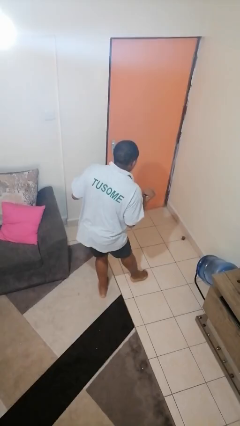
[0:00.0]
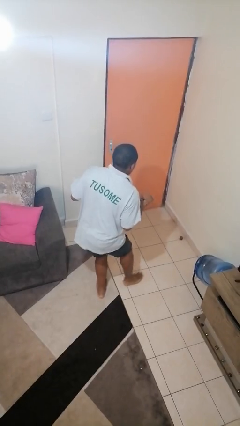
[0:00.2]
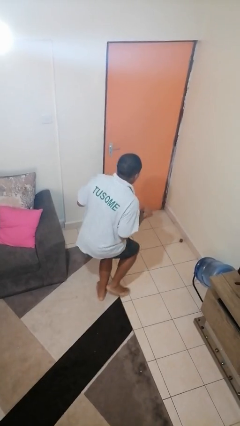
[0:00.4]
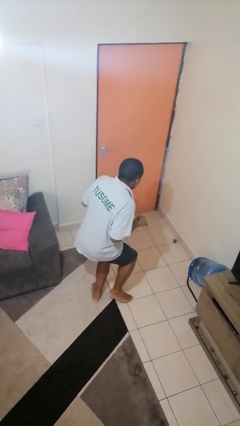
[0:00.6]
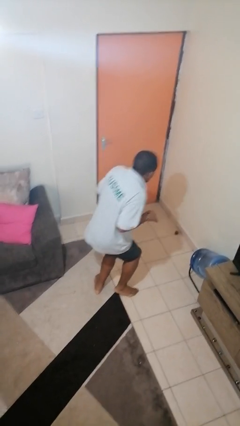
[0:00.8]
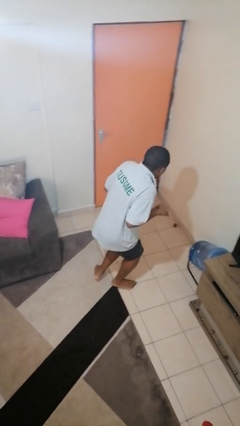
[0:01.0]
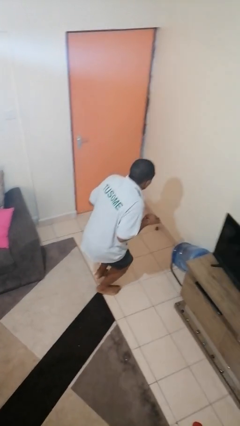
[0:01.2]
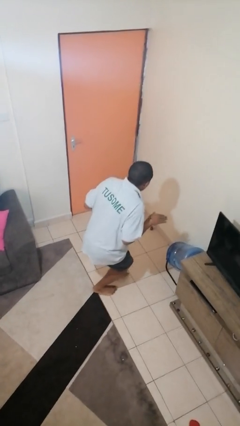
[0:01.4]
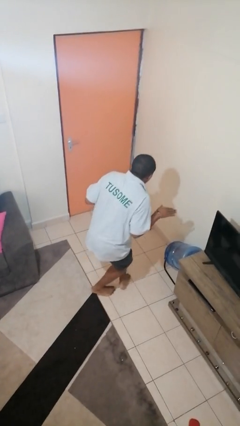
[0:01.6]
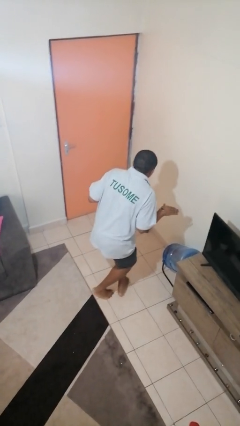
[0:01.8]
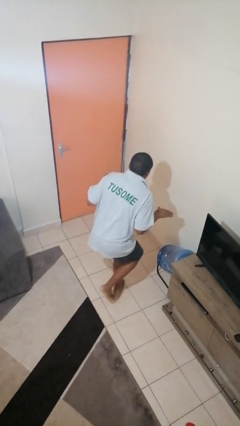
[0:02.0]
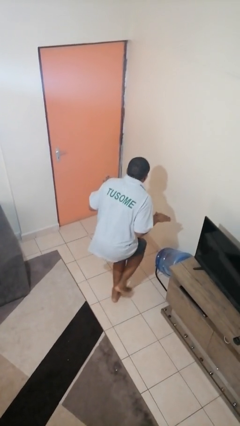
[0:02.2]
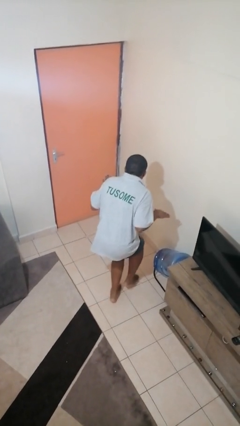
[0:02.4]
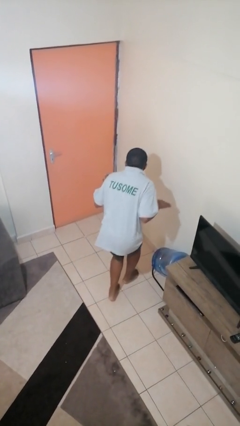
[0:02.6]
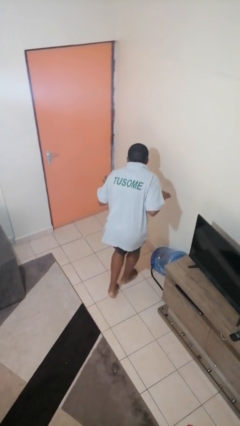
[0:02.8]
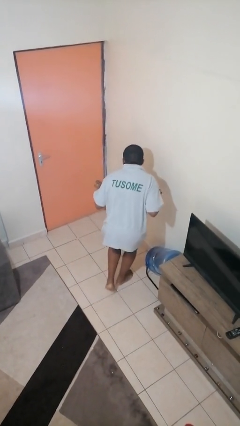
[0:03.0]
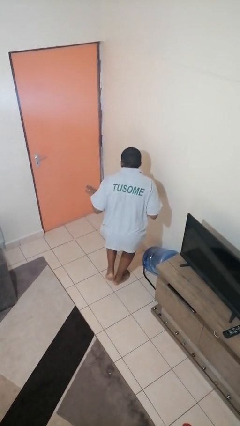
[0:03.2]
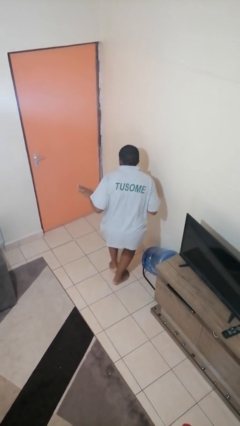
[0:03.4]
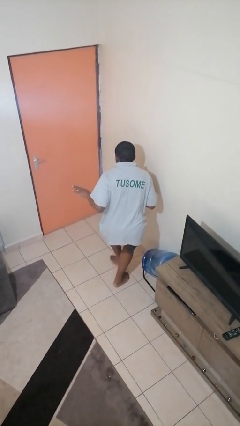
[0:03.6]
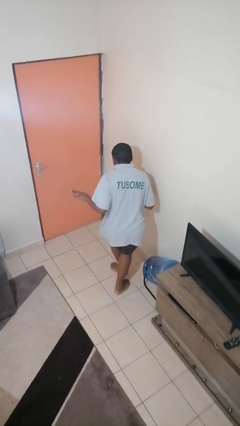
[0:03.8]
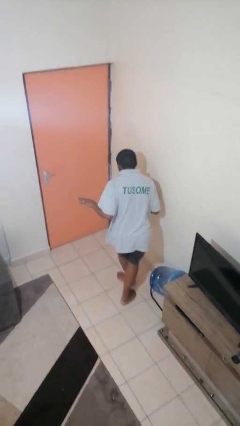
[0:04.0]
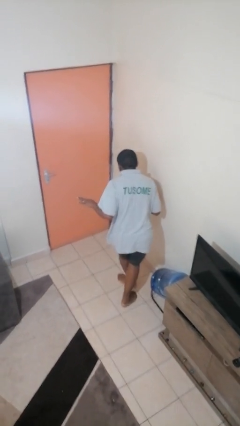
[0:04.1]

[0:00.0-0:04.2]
person walks tiptoe

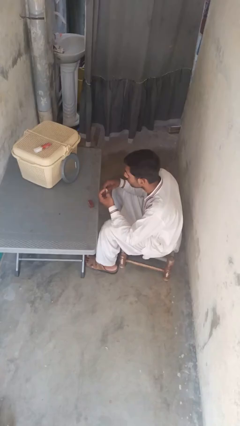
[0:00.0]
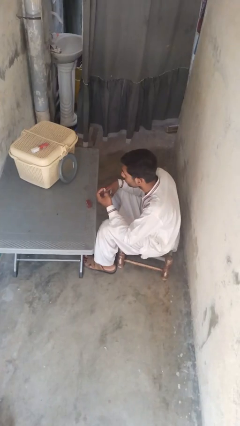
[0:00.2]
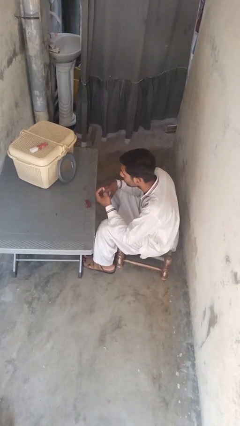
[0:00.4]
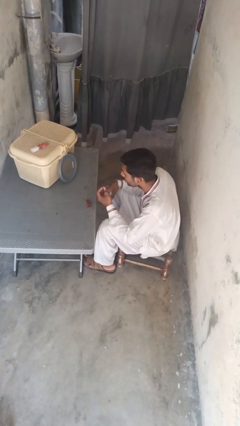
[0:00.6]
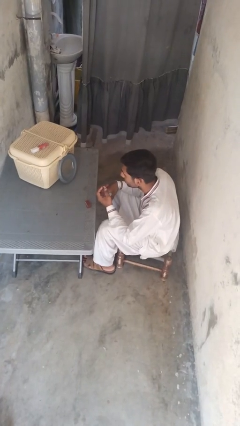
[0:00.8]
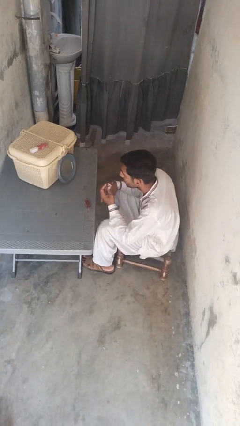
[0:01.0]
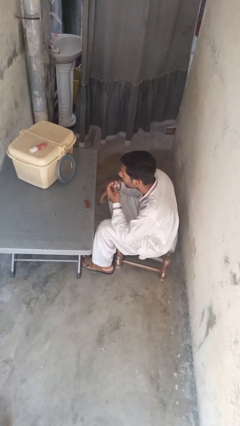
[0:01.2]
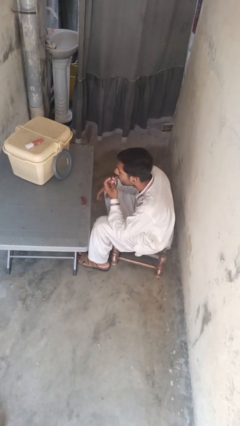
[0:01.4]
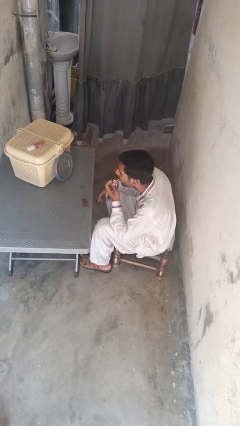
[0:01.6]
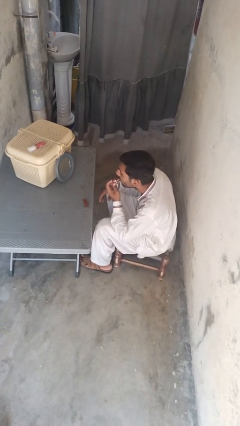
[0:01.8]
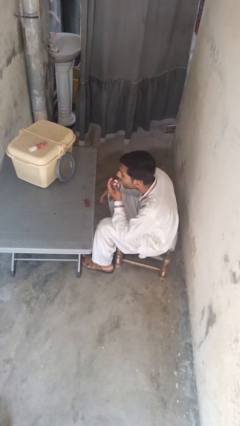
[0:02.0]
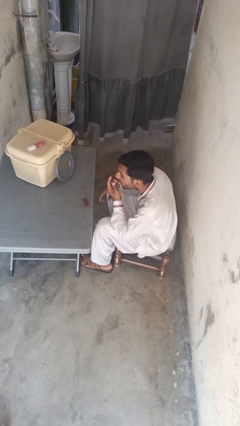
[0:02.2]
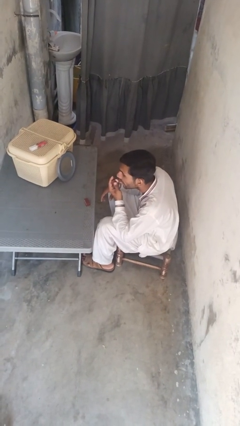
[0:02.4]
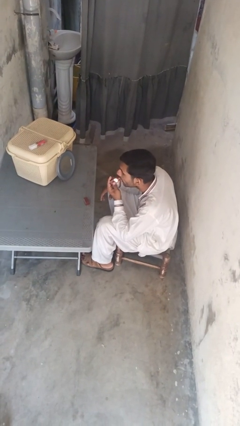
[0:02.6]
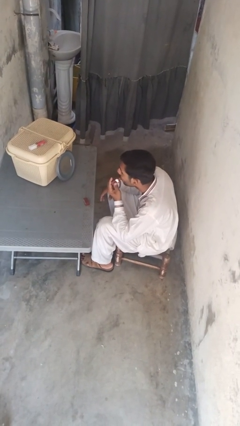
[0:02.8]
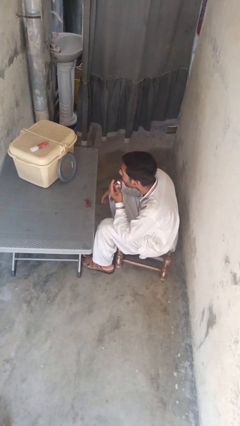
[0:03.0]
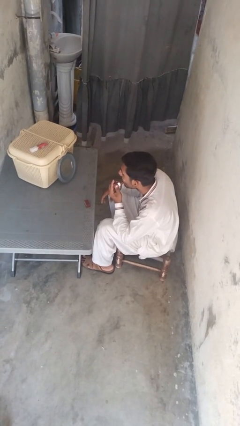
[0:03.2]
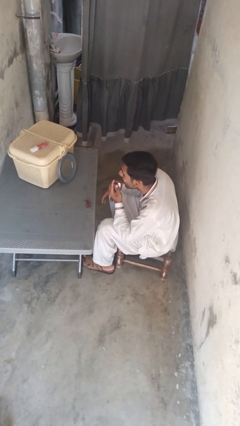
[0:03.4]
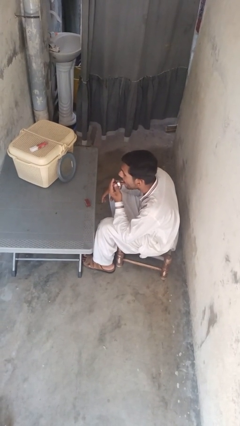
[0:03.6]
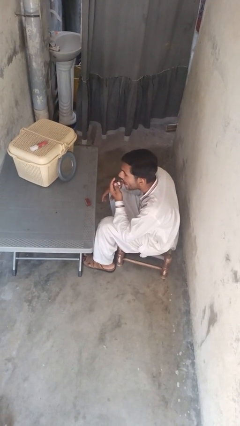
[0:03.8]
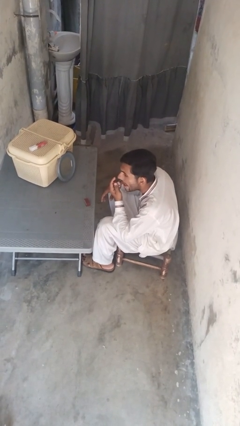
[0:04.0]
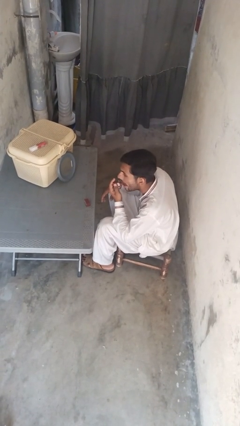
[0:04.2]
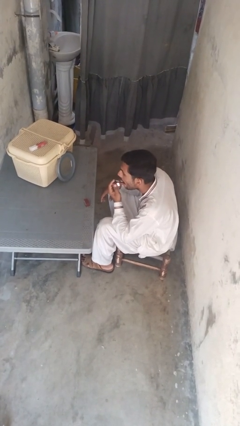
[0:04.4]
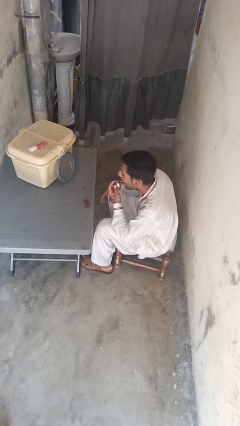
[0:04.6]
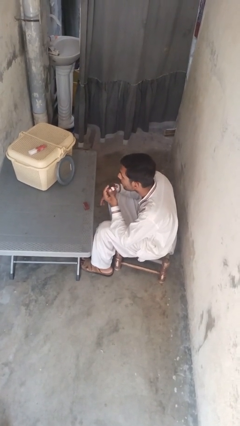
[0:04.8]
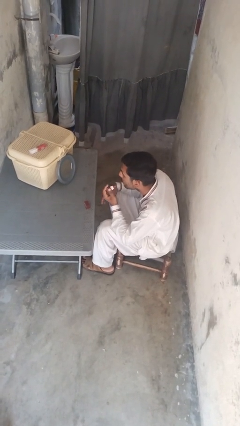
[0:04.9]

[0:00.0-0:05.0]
person applies lip makeup

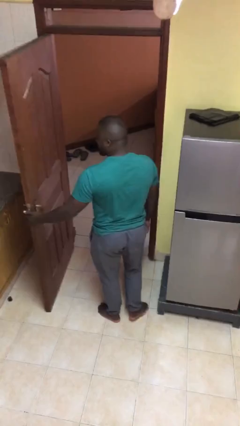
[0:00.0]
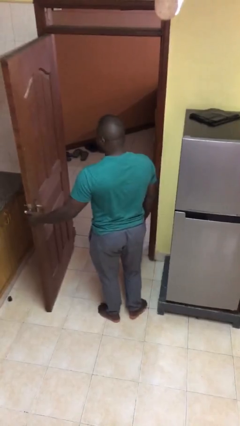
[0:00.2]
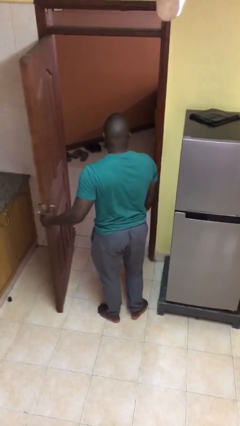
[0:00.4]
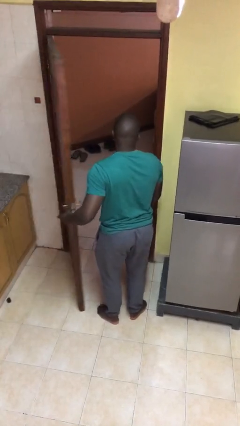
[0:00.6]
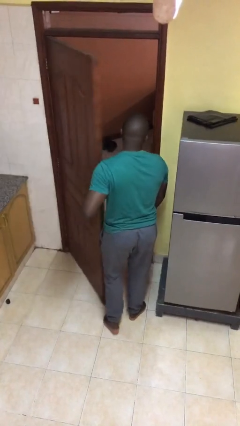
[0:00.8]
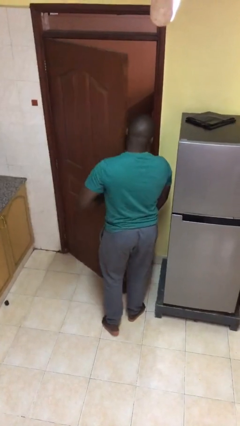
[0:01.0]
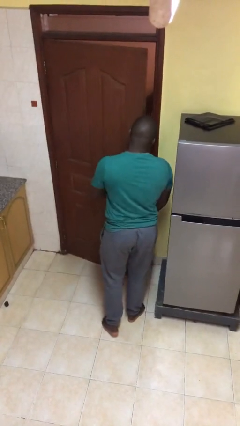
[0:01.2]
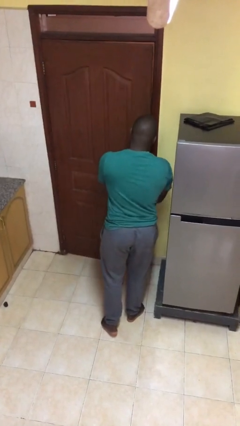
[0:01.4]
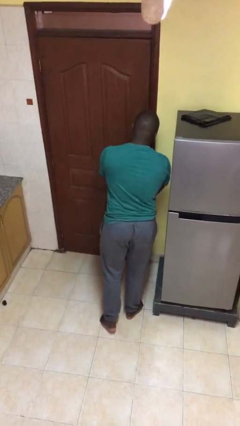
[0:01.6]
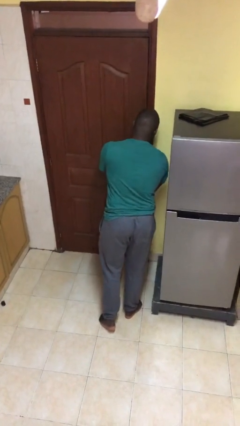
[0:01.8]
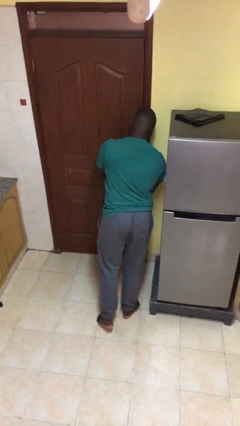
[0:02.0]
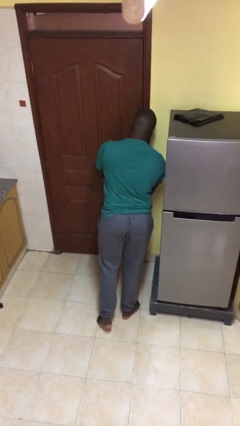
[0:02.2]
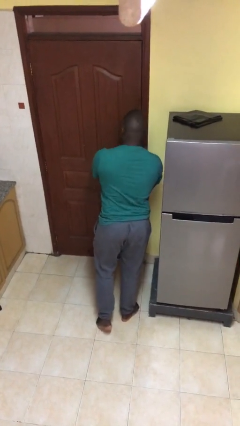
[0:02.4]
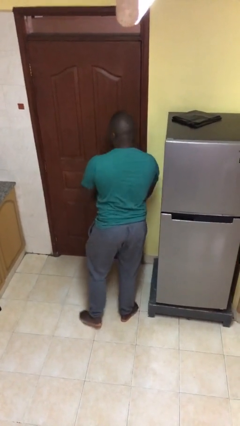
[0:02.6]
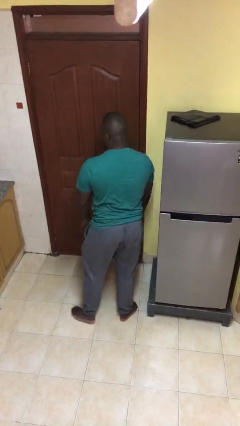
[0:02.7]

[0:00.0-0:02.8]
person closes facility door

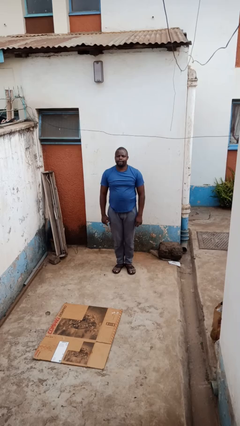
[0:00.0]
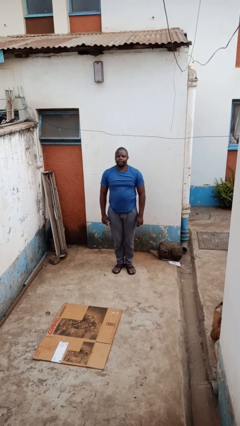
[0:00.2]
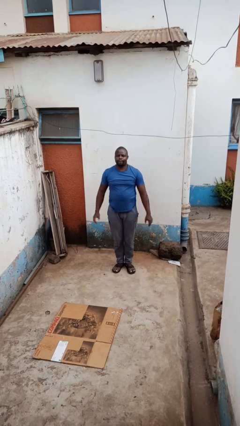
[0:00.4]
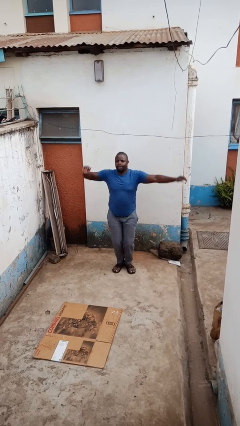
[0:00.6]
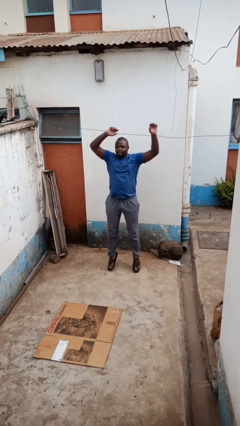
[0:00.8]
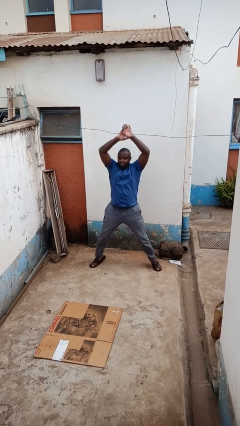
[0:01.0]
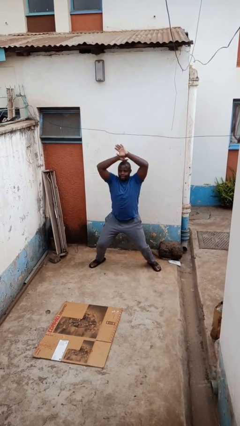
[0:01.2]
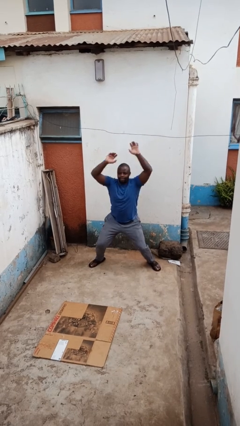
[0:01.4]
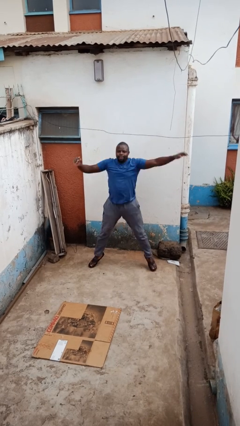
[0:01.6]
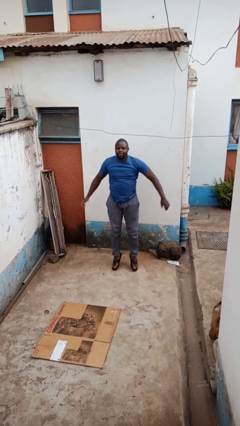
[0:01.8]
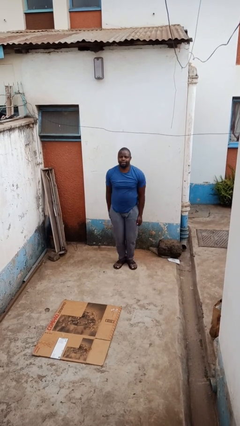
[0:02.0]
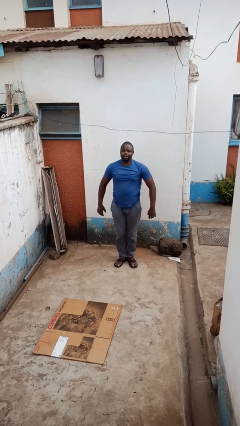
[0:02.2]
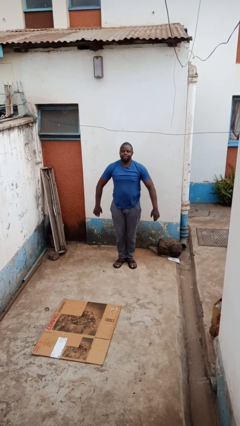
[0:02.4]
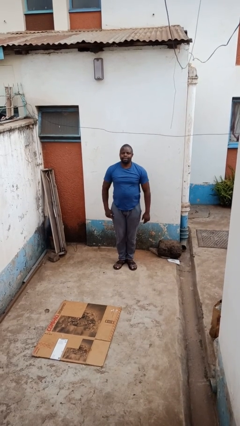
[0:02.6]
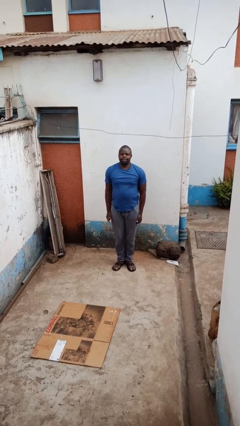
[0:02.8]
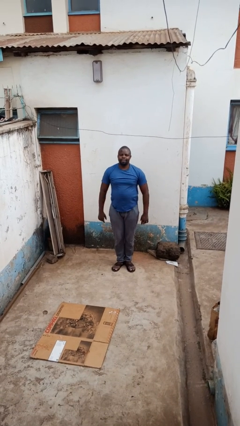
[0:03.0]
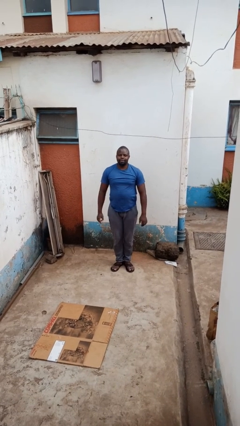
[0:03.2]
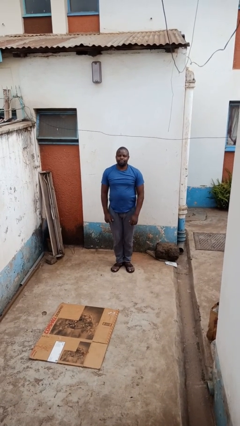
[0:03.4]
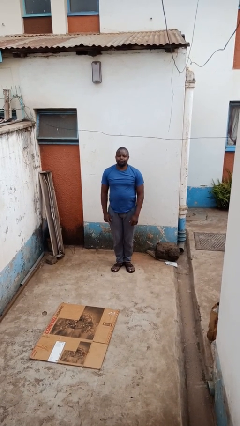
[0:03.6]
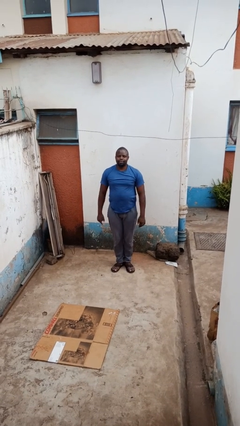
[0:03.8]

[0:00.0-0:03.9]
person exercises with jumping jacks

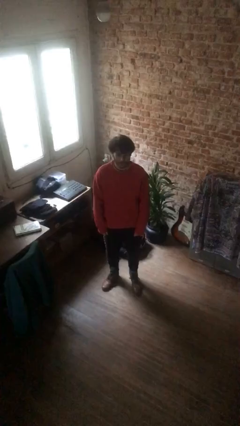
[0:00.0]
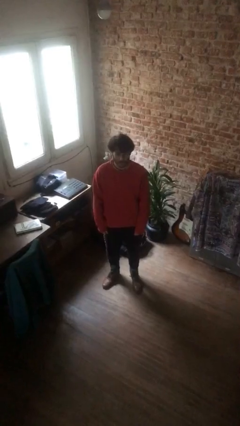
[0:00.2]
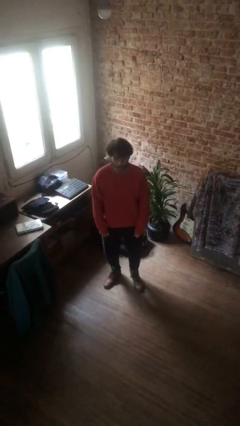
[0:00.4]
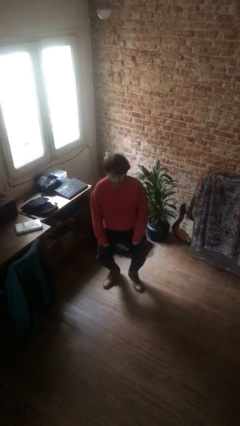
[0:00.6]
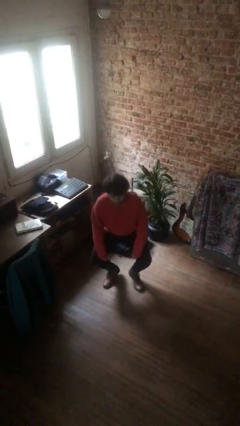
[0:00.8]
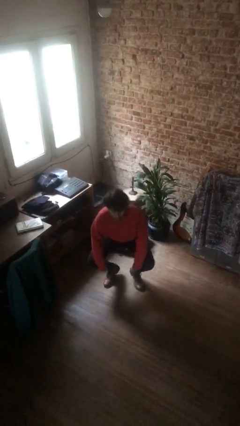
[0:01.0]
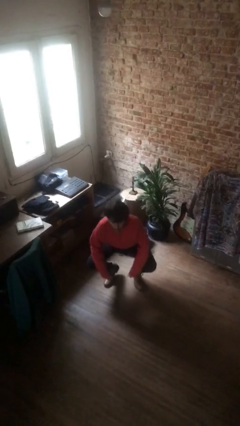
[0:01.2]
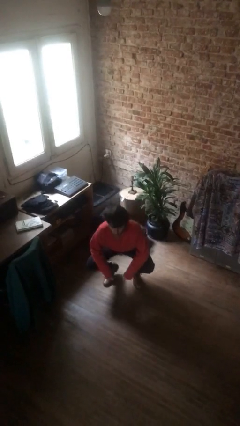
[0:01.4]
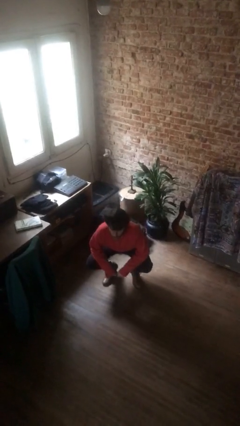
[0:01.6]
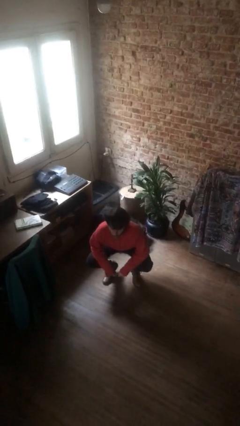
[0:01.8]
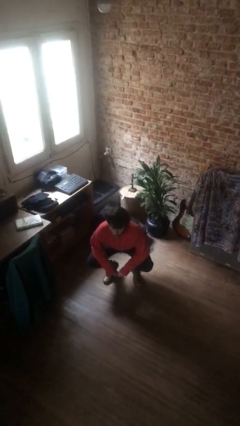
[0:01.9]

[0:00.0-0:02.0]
person squats
